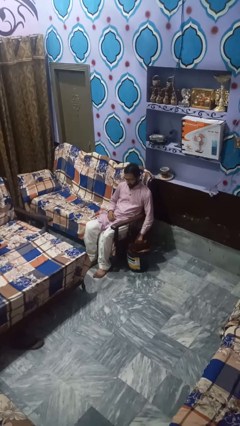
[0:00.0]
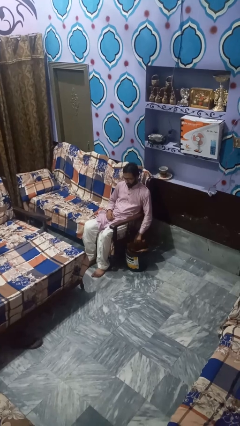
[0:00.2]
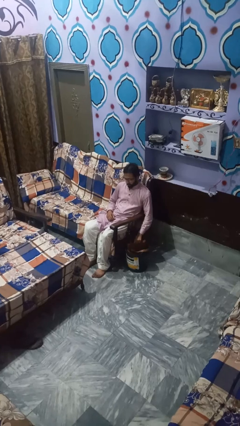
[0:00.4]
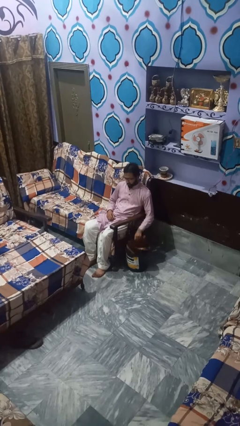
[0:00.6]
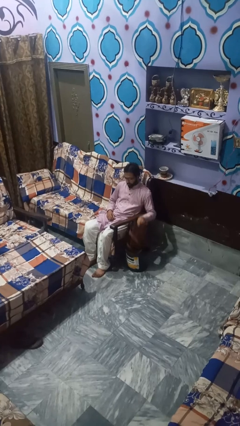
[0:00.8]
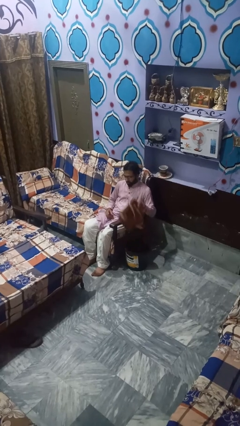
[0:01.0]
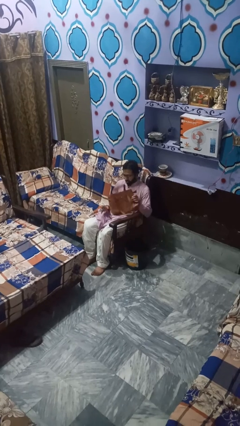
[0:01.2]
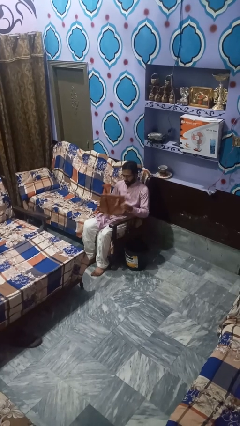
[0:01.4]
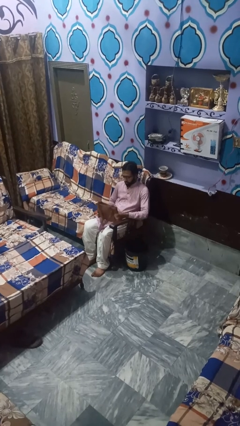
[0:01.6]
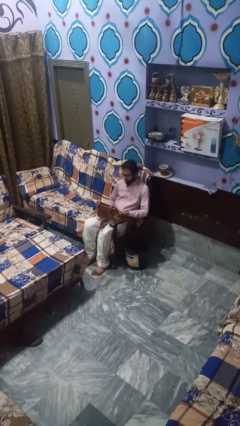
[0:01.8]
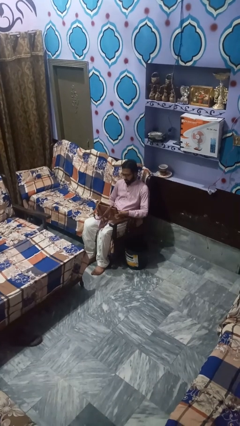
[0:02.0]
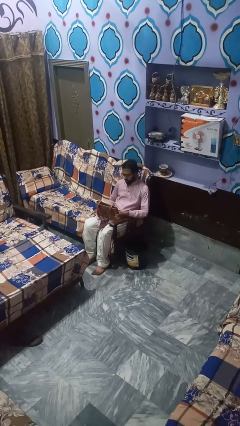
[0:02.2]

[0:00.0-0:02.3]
person takes object from basket

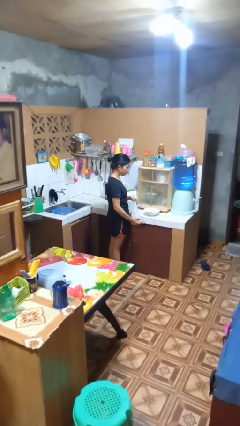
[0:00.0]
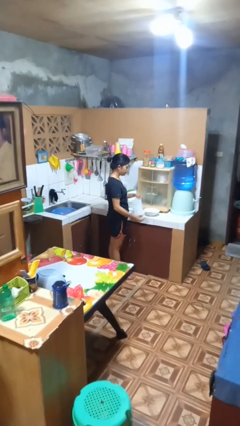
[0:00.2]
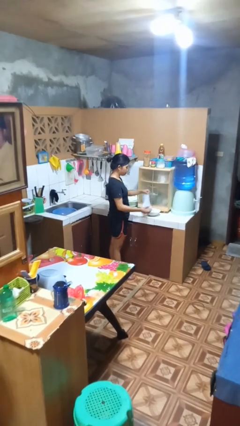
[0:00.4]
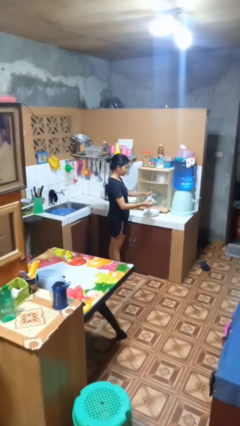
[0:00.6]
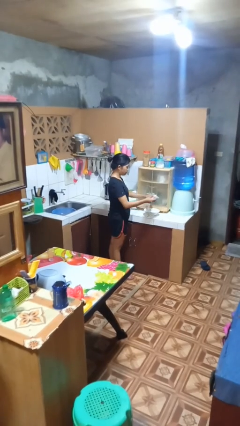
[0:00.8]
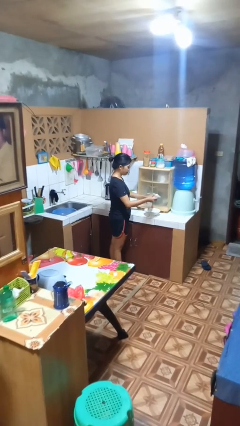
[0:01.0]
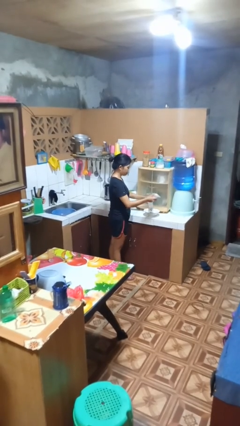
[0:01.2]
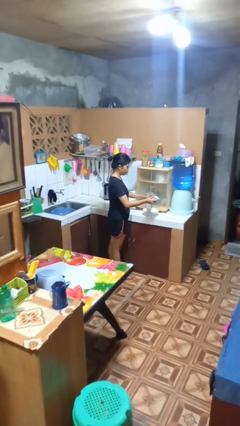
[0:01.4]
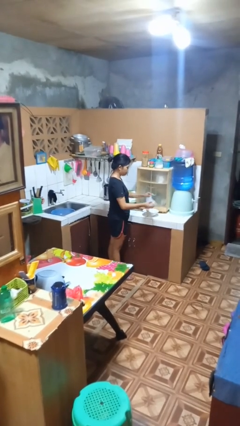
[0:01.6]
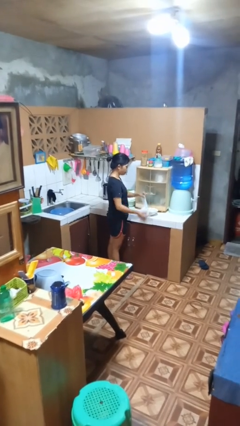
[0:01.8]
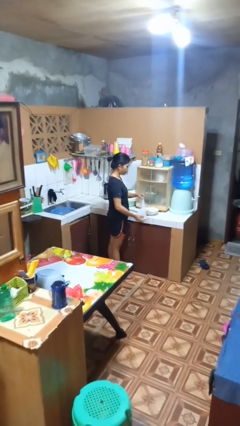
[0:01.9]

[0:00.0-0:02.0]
person pours into bowl

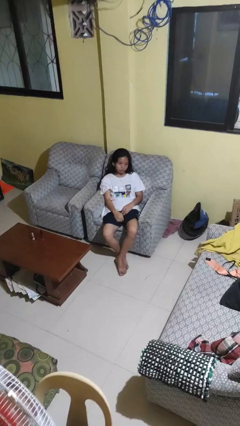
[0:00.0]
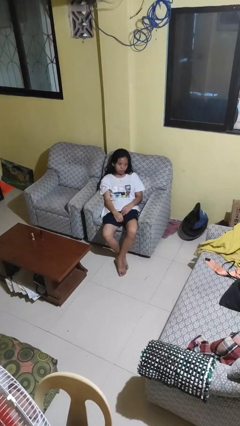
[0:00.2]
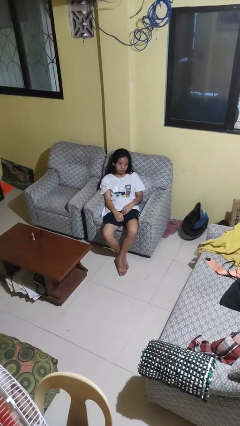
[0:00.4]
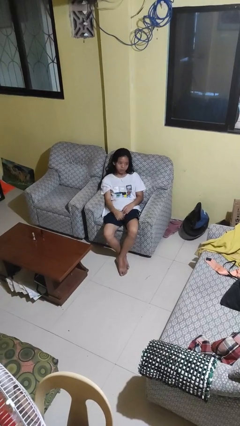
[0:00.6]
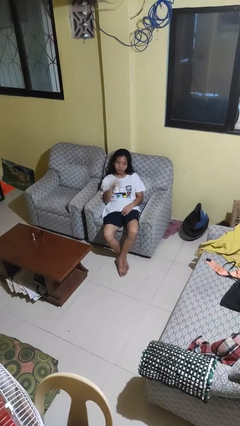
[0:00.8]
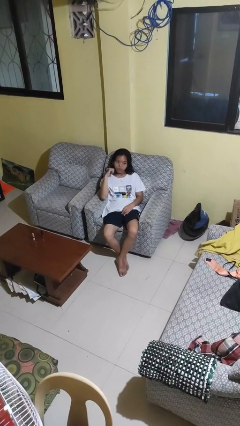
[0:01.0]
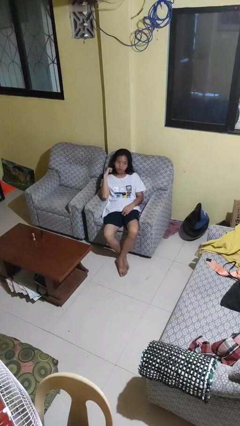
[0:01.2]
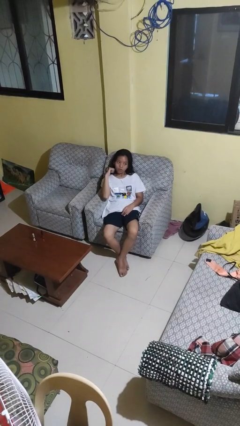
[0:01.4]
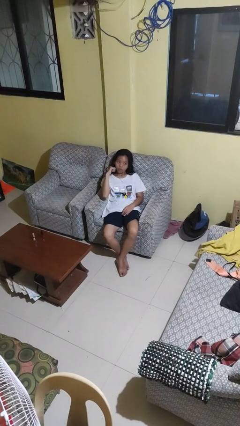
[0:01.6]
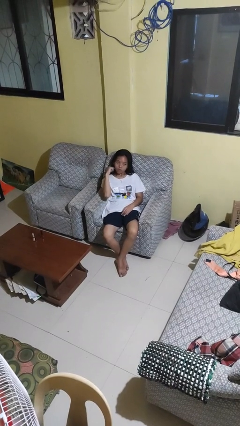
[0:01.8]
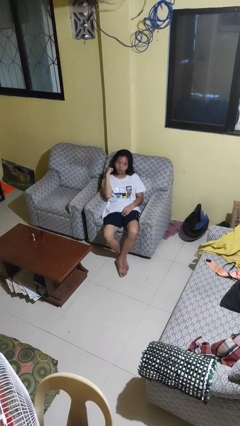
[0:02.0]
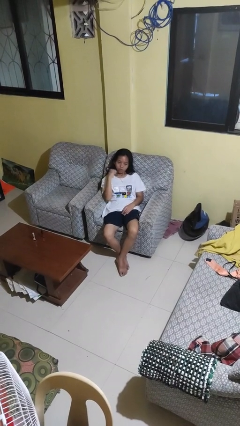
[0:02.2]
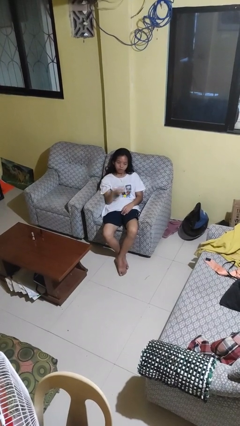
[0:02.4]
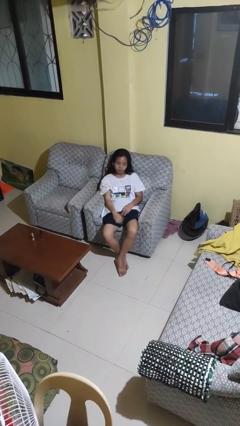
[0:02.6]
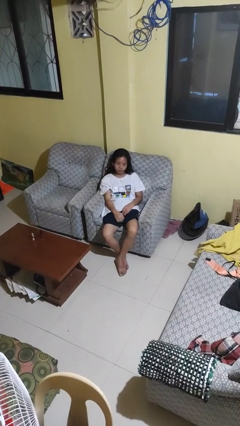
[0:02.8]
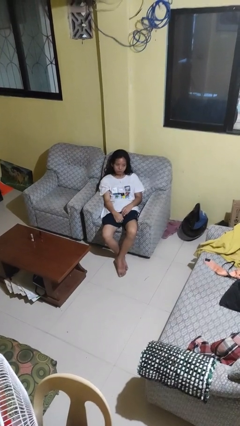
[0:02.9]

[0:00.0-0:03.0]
person gestures behind me

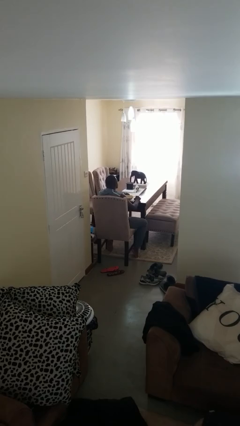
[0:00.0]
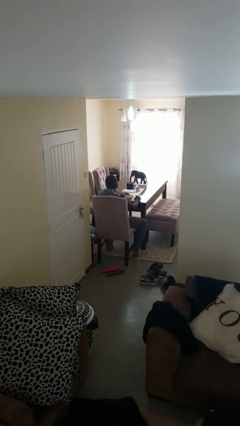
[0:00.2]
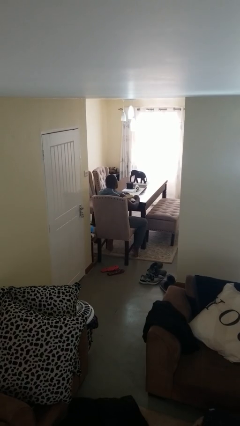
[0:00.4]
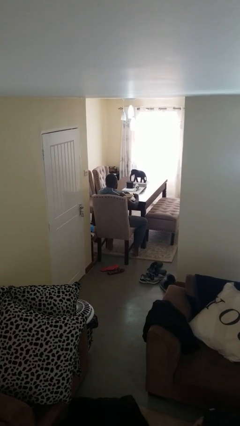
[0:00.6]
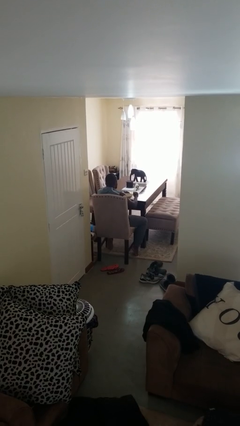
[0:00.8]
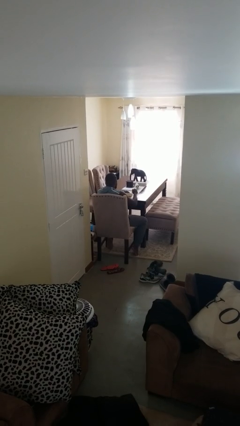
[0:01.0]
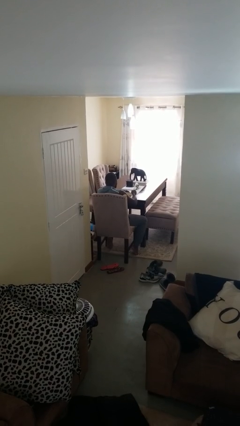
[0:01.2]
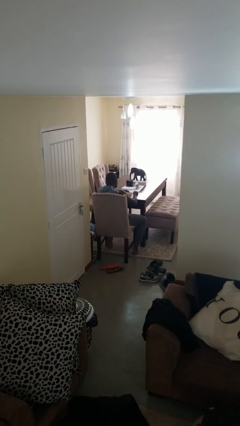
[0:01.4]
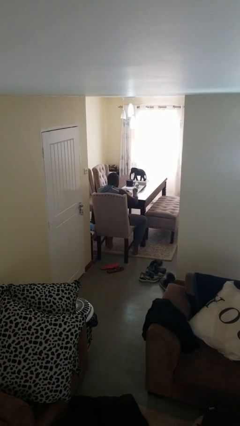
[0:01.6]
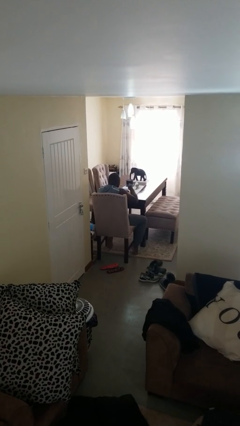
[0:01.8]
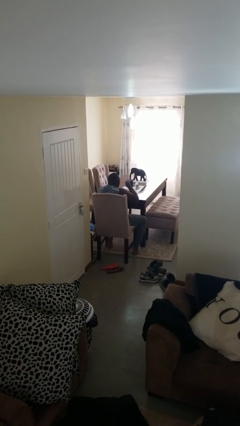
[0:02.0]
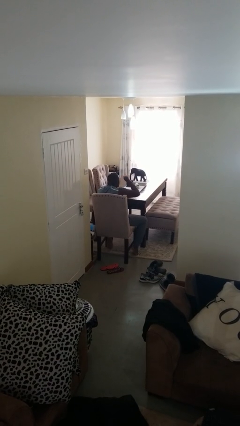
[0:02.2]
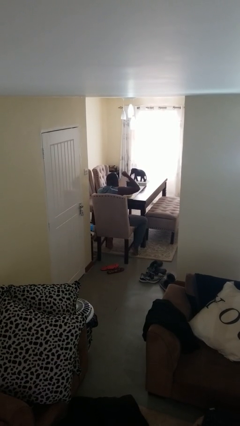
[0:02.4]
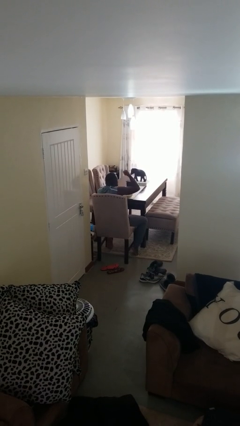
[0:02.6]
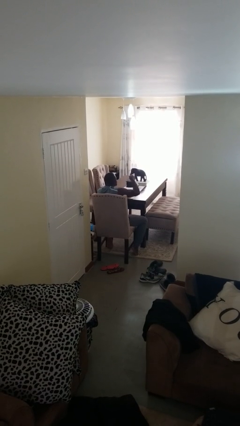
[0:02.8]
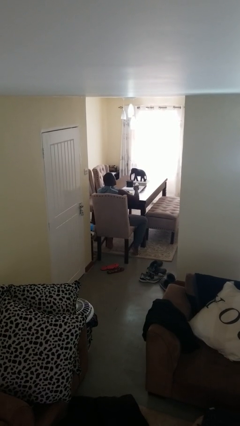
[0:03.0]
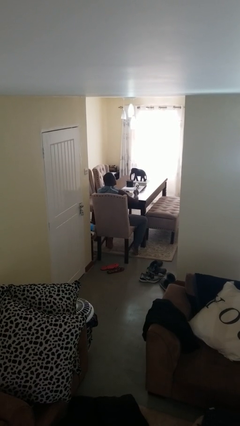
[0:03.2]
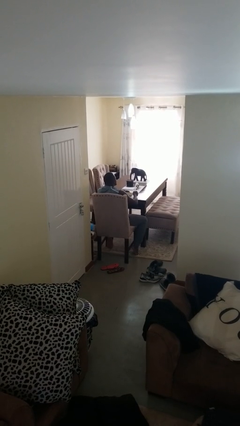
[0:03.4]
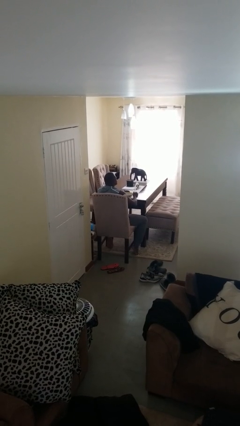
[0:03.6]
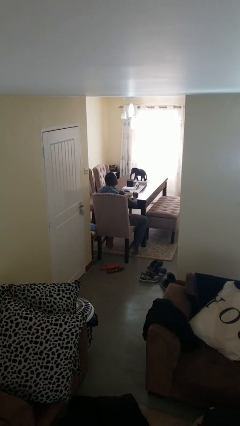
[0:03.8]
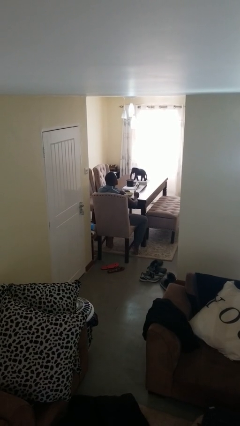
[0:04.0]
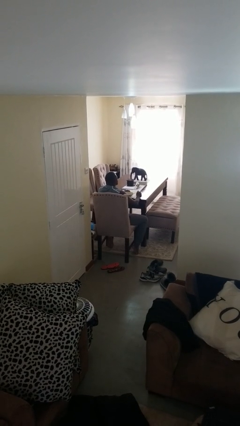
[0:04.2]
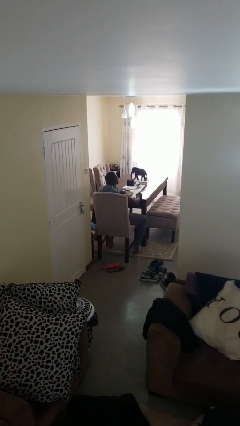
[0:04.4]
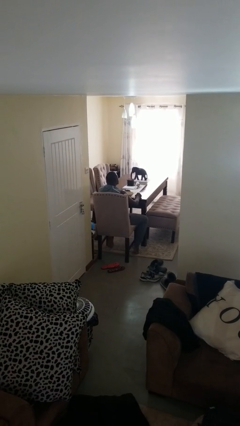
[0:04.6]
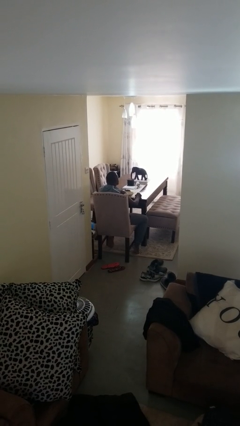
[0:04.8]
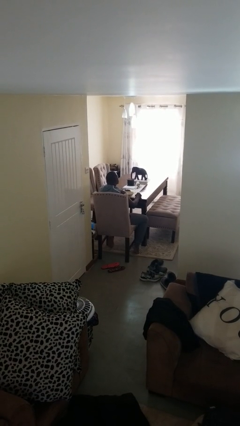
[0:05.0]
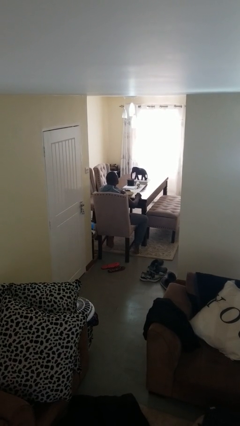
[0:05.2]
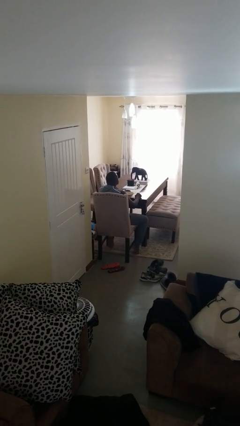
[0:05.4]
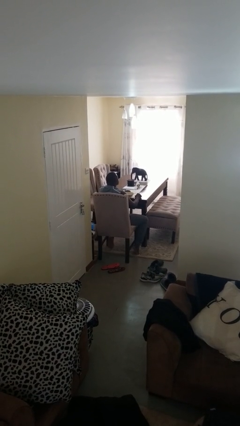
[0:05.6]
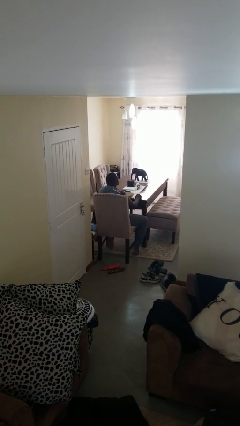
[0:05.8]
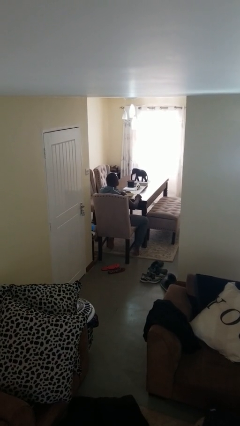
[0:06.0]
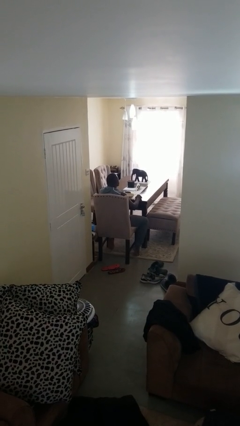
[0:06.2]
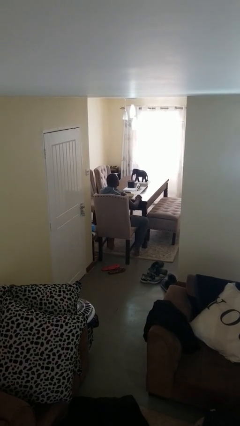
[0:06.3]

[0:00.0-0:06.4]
person eats with utensil

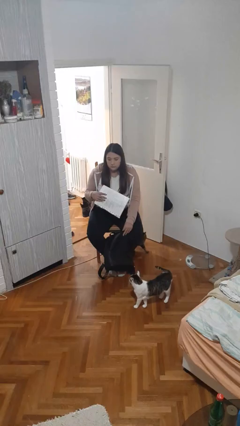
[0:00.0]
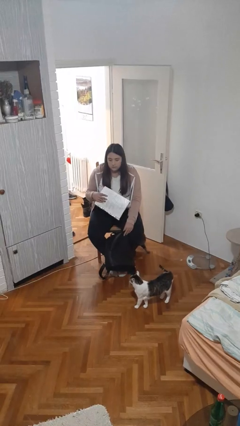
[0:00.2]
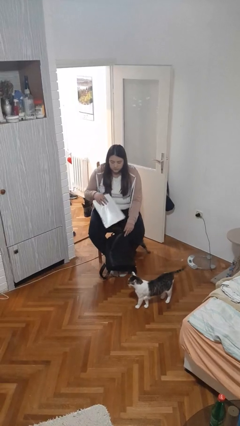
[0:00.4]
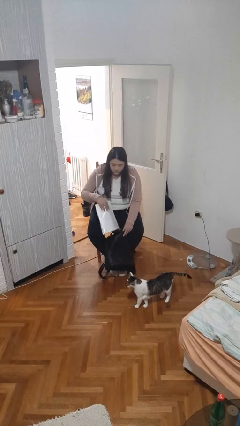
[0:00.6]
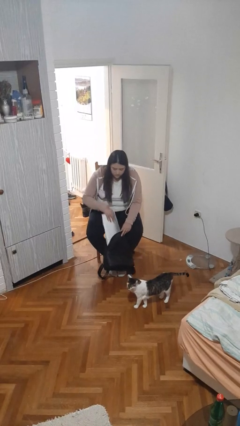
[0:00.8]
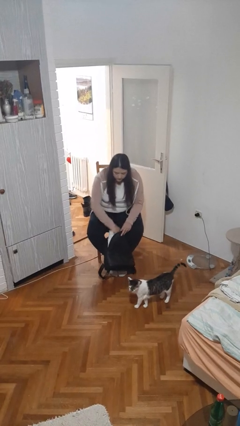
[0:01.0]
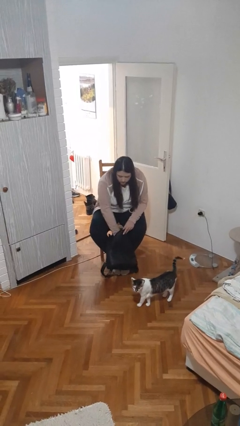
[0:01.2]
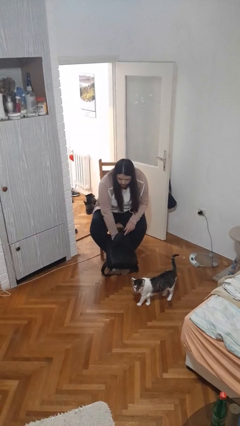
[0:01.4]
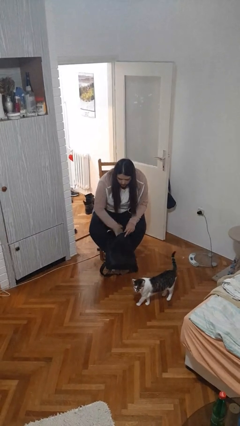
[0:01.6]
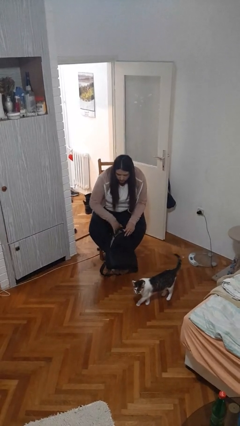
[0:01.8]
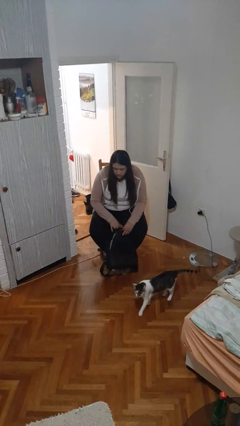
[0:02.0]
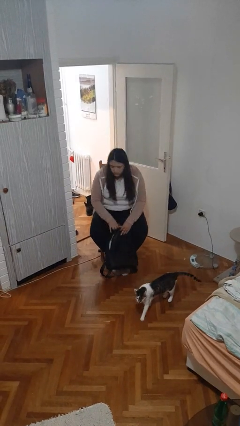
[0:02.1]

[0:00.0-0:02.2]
person puts object into backpack

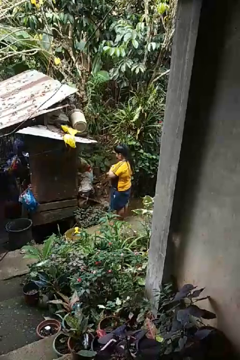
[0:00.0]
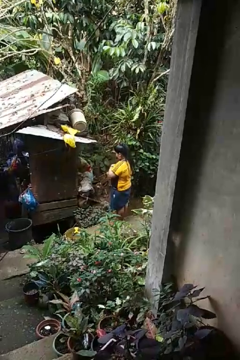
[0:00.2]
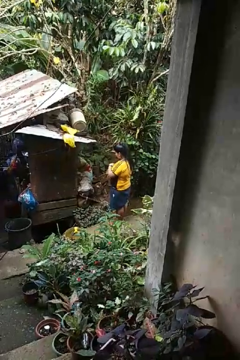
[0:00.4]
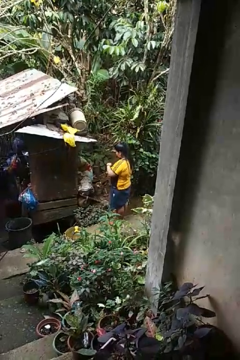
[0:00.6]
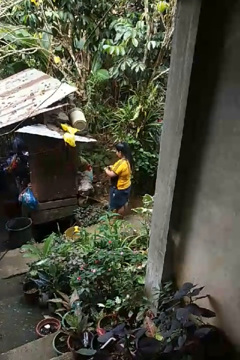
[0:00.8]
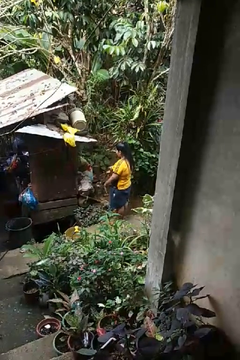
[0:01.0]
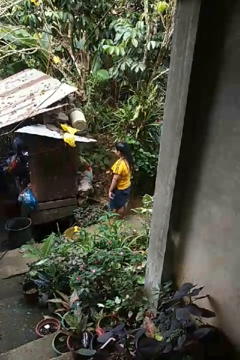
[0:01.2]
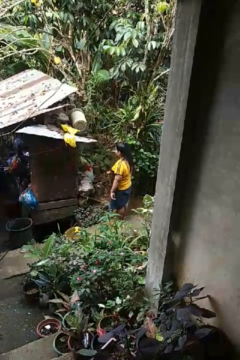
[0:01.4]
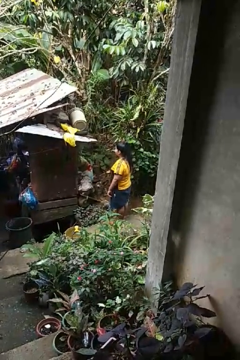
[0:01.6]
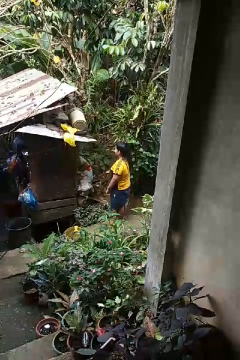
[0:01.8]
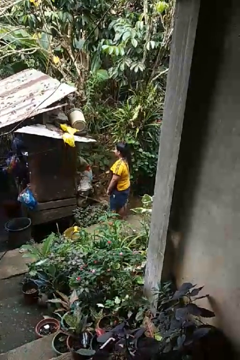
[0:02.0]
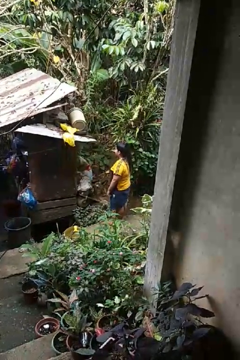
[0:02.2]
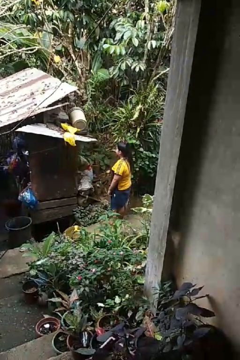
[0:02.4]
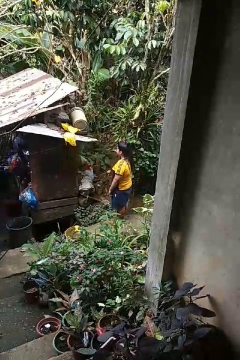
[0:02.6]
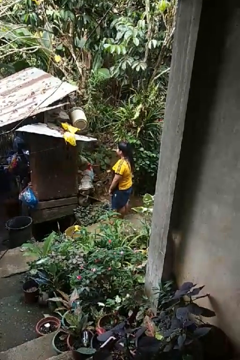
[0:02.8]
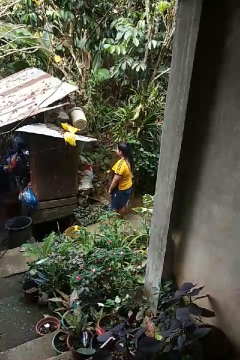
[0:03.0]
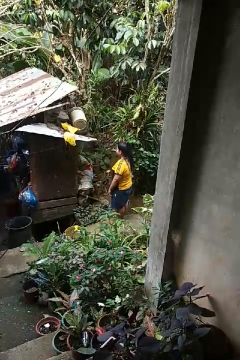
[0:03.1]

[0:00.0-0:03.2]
person takes off wristwatch
